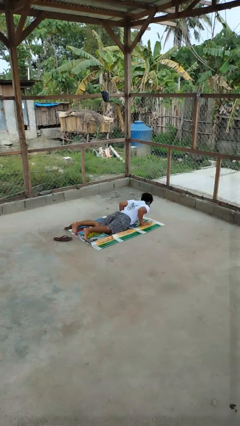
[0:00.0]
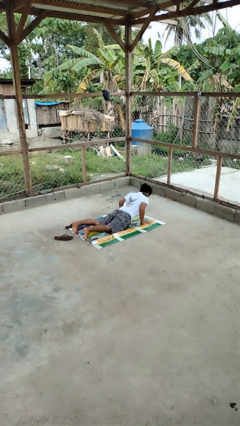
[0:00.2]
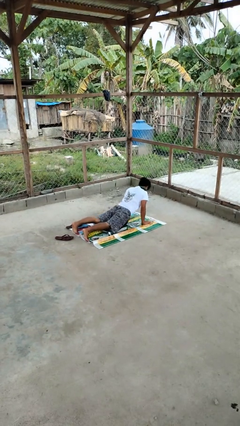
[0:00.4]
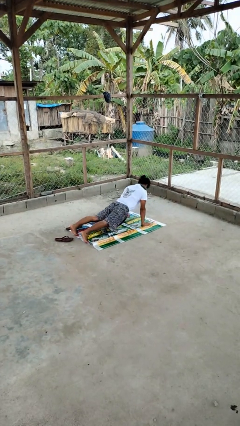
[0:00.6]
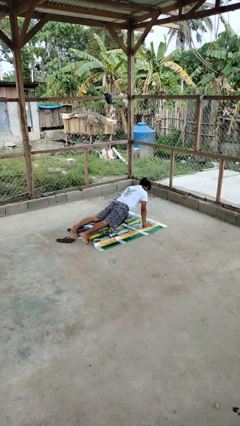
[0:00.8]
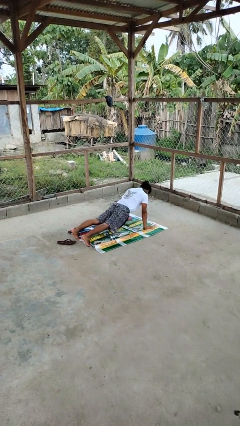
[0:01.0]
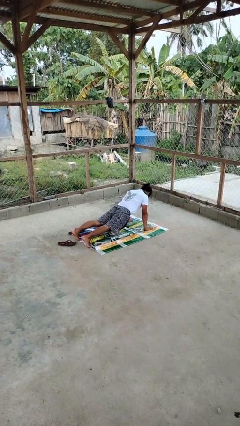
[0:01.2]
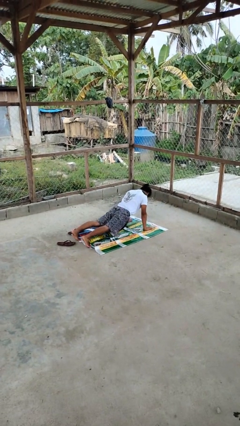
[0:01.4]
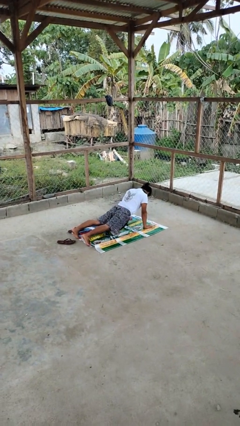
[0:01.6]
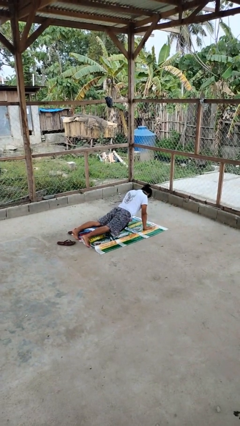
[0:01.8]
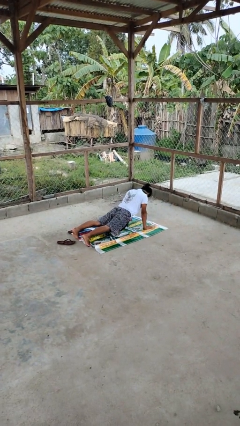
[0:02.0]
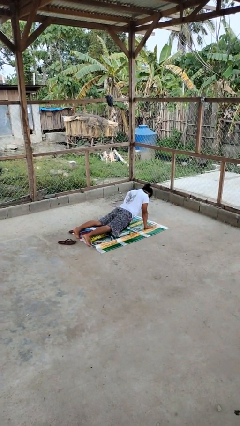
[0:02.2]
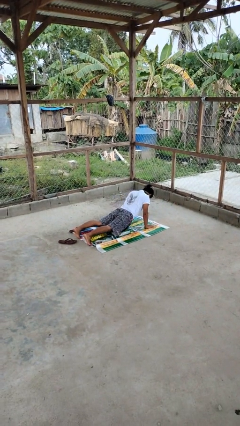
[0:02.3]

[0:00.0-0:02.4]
person exercises with pushup

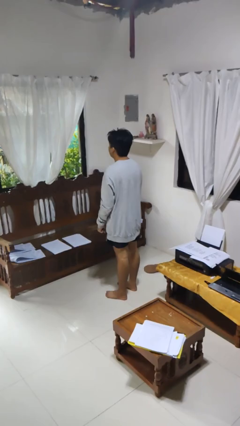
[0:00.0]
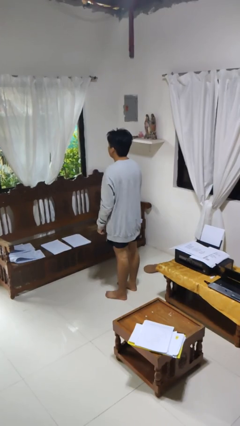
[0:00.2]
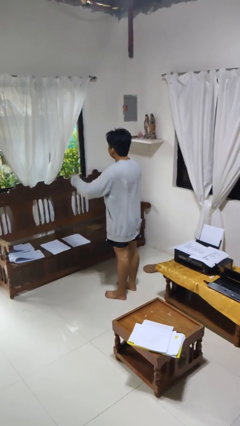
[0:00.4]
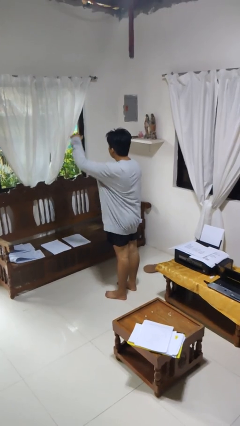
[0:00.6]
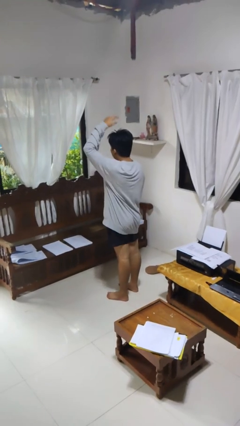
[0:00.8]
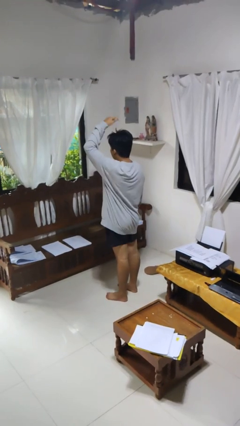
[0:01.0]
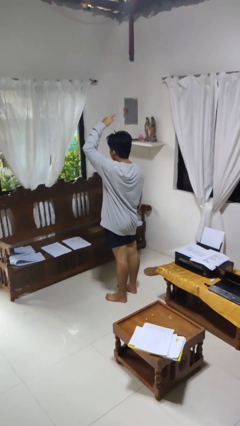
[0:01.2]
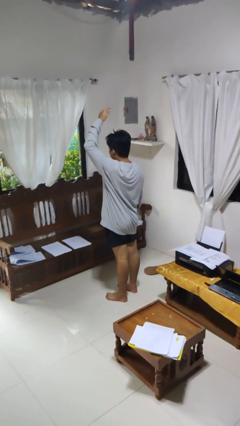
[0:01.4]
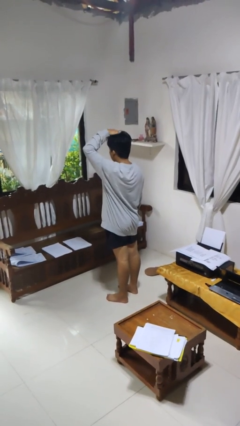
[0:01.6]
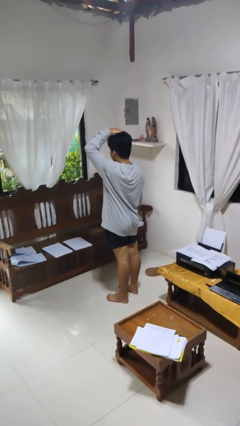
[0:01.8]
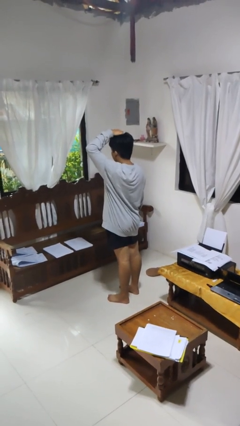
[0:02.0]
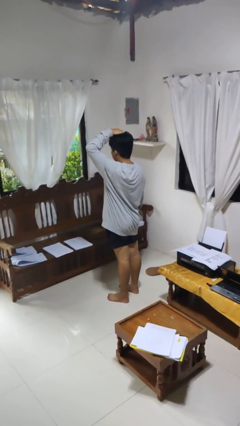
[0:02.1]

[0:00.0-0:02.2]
person pats head

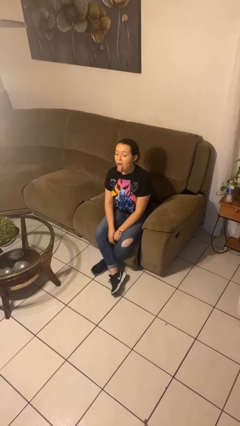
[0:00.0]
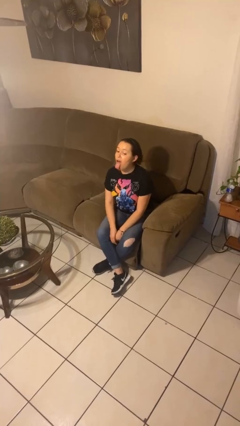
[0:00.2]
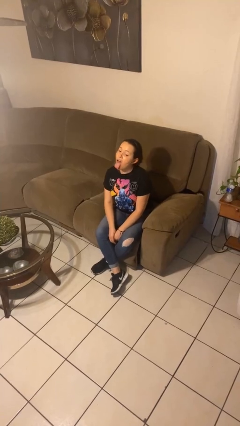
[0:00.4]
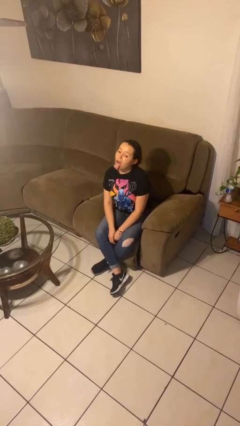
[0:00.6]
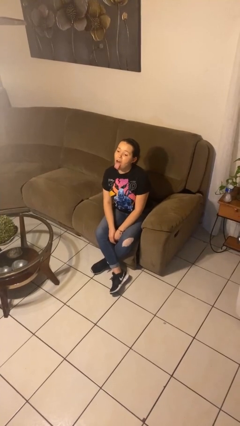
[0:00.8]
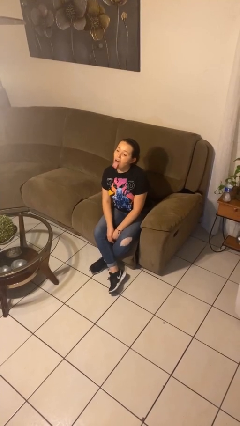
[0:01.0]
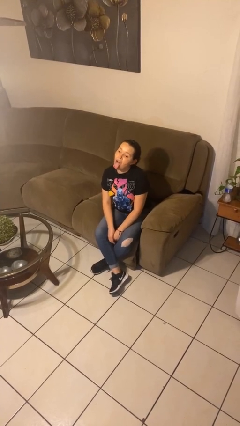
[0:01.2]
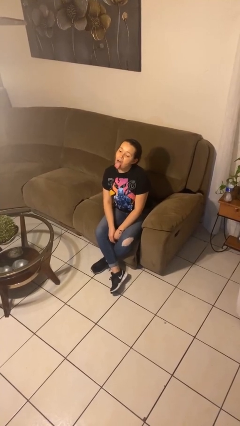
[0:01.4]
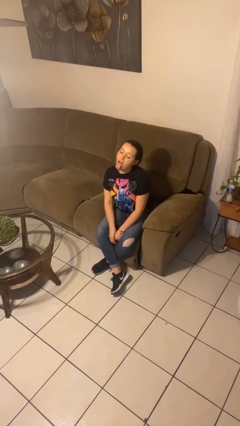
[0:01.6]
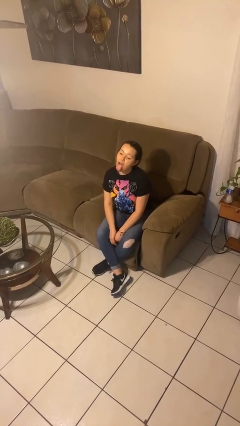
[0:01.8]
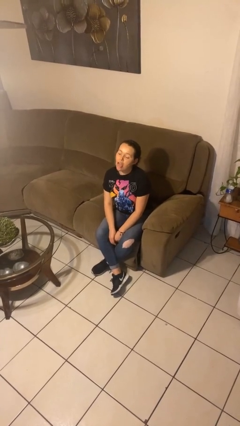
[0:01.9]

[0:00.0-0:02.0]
person sticks out tongue

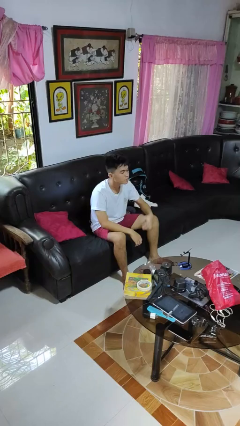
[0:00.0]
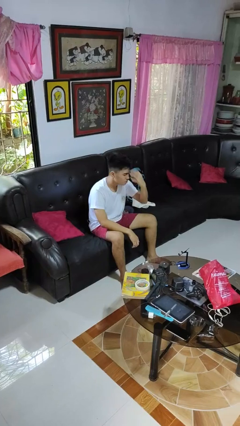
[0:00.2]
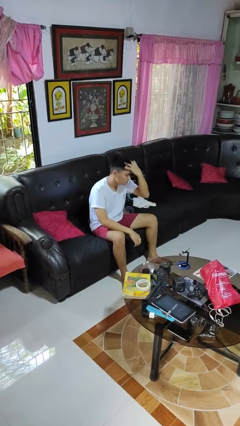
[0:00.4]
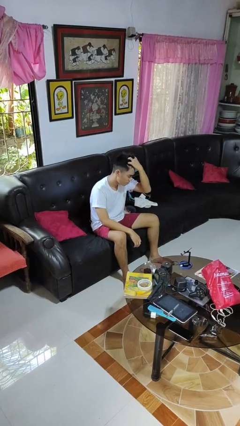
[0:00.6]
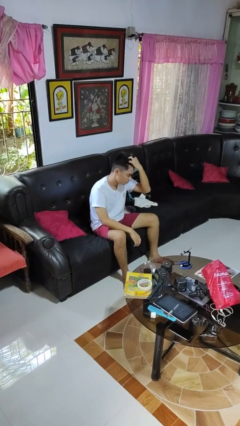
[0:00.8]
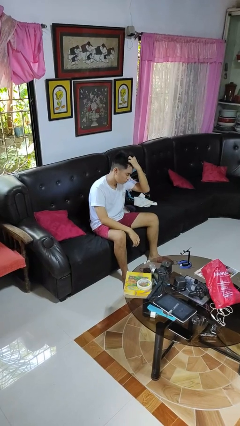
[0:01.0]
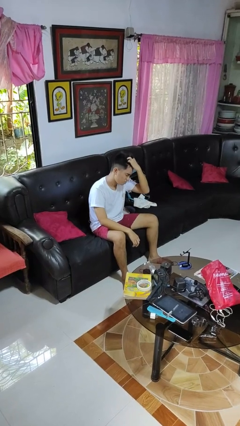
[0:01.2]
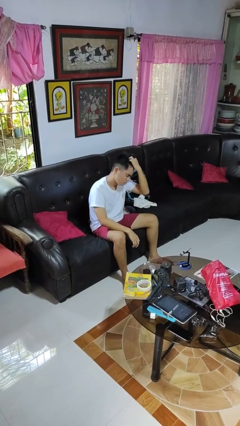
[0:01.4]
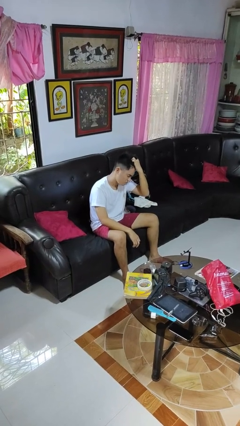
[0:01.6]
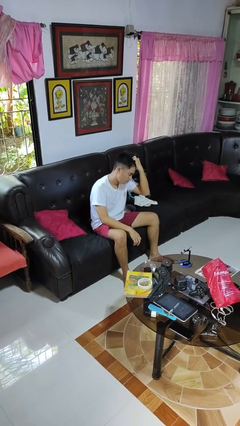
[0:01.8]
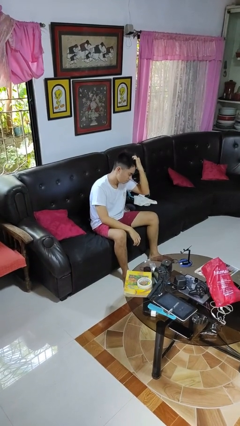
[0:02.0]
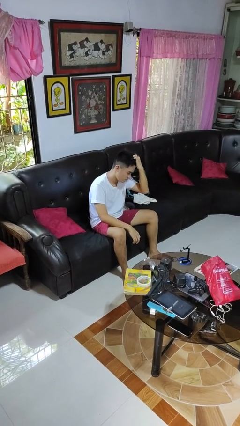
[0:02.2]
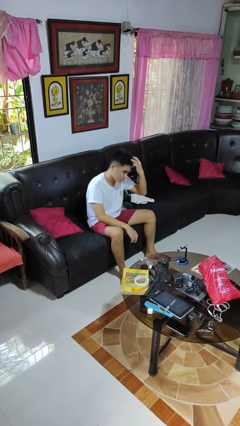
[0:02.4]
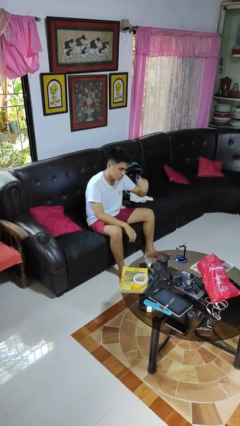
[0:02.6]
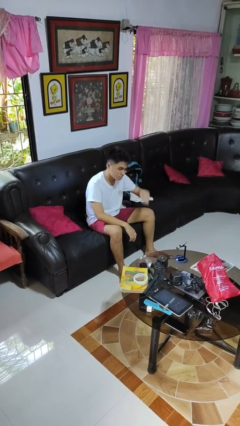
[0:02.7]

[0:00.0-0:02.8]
person scratches face

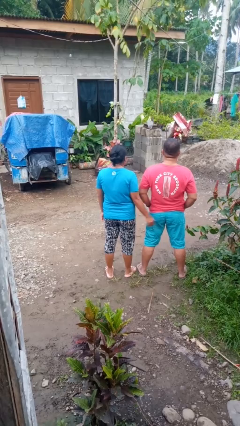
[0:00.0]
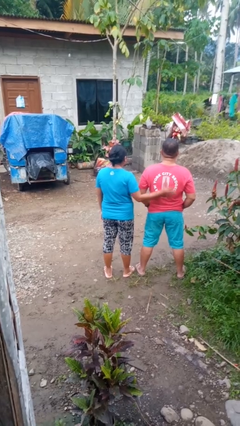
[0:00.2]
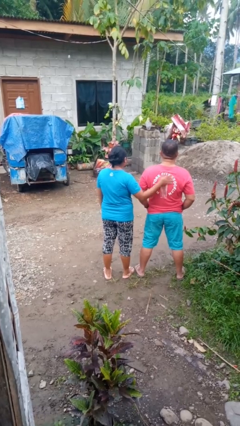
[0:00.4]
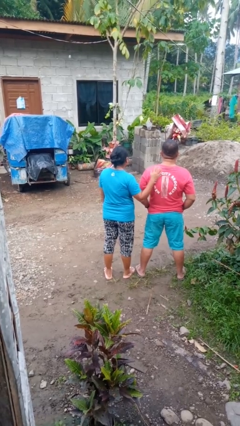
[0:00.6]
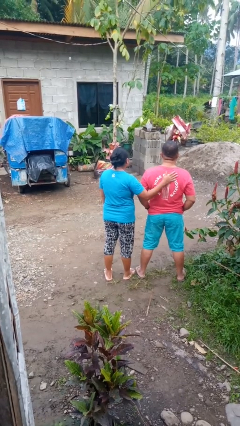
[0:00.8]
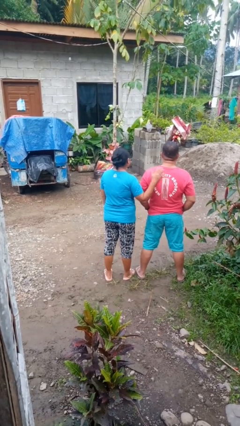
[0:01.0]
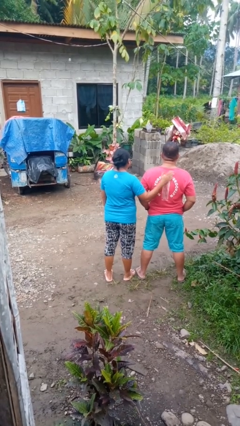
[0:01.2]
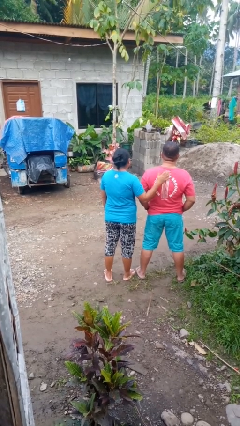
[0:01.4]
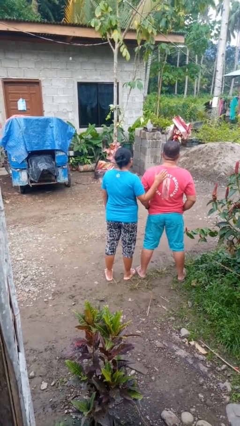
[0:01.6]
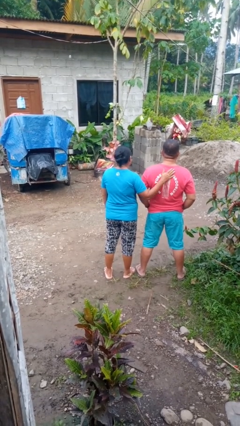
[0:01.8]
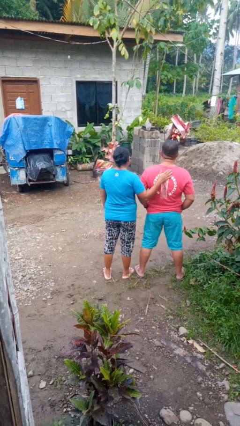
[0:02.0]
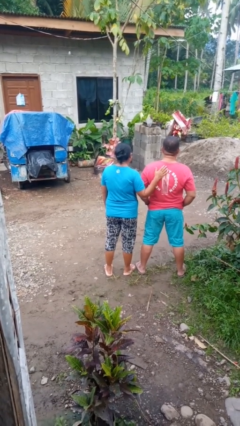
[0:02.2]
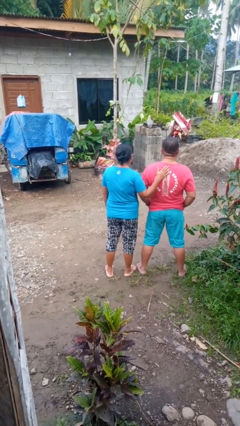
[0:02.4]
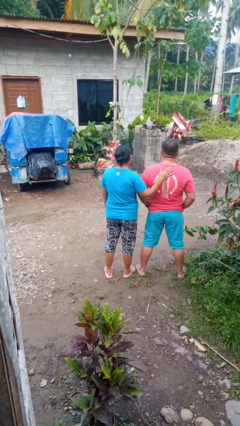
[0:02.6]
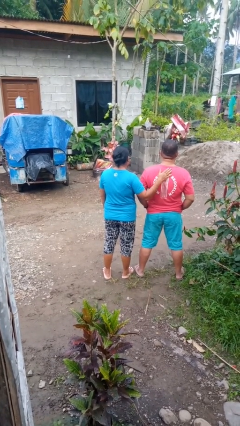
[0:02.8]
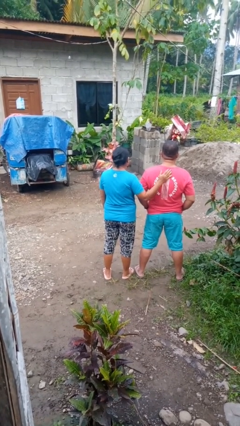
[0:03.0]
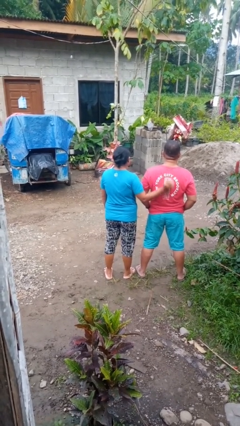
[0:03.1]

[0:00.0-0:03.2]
person touches back of person

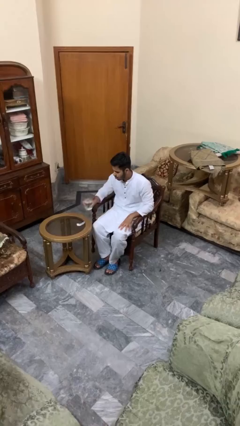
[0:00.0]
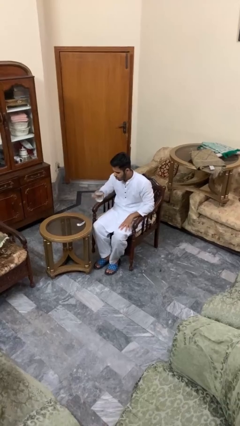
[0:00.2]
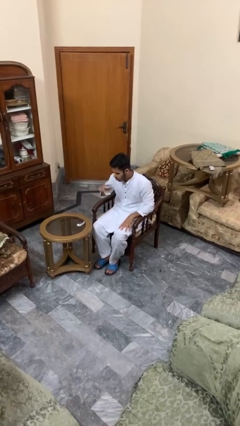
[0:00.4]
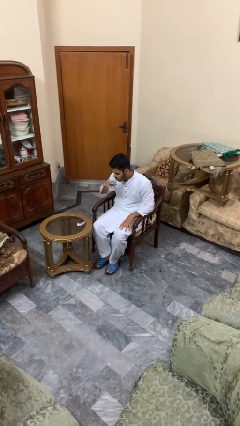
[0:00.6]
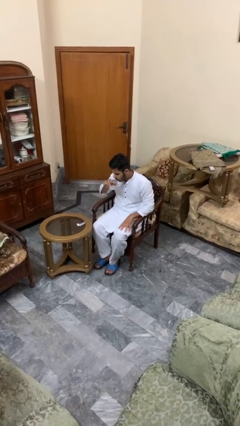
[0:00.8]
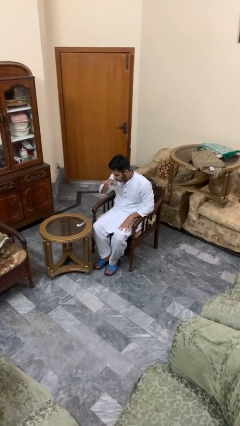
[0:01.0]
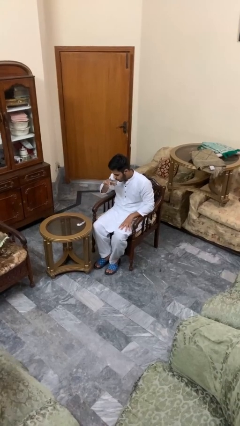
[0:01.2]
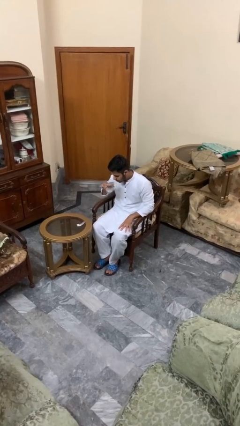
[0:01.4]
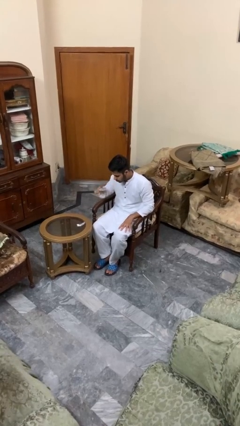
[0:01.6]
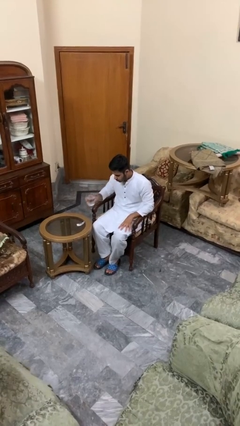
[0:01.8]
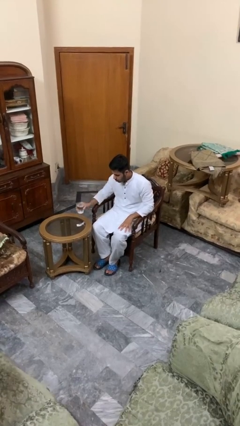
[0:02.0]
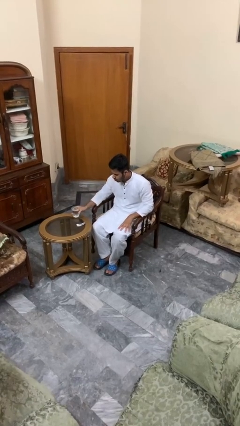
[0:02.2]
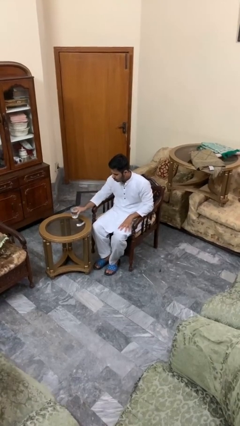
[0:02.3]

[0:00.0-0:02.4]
person drinks from cup

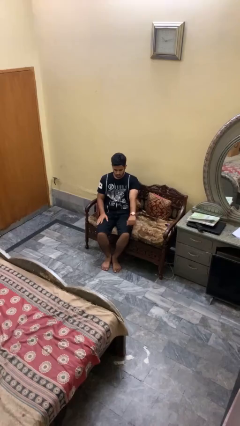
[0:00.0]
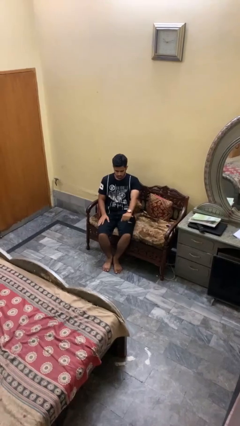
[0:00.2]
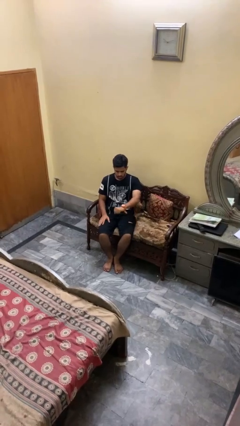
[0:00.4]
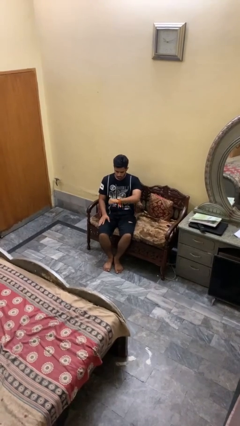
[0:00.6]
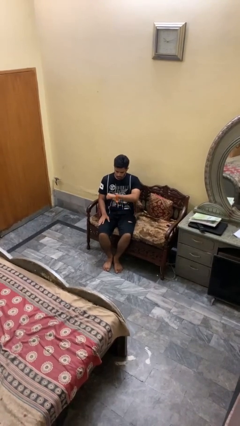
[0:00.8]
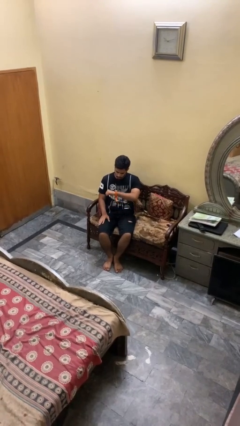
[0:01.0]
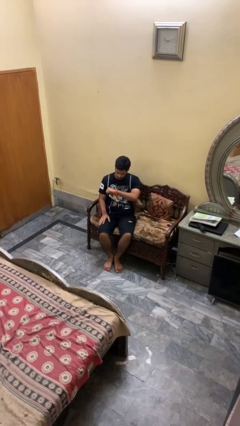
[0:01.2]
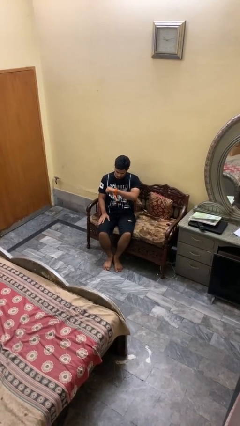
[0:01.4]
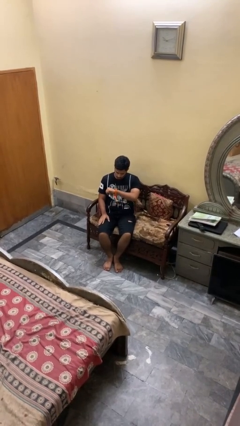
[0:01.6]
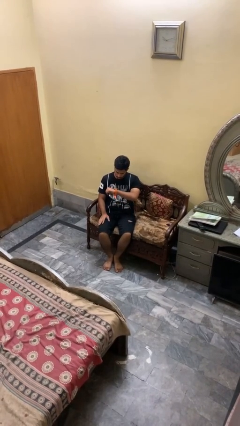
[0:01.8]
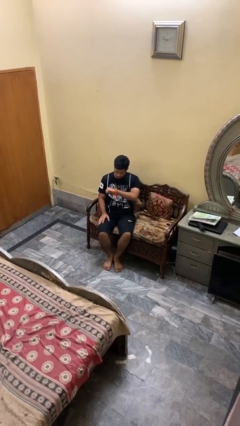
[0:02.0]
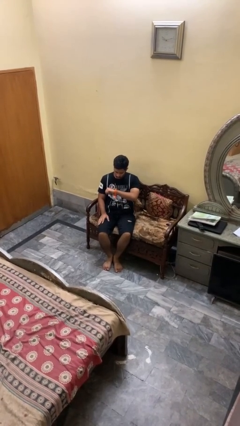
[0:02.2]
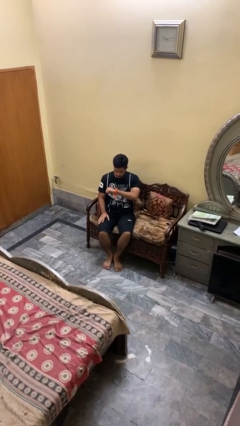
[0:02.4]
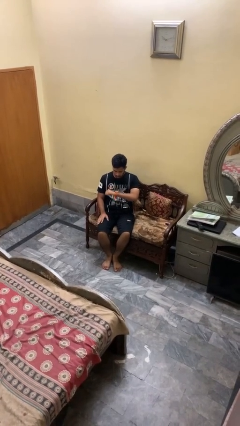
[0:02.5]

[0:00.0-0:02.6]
person looks at wristwatch
